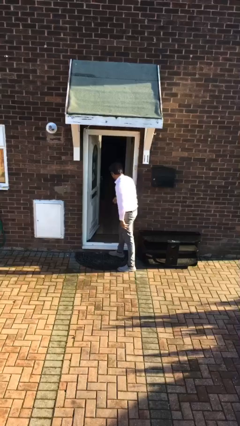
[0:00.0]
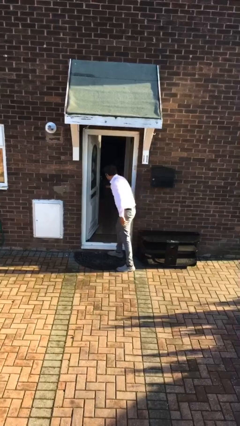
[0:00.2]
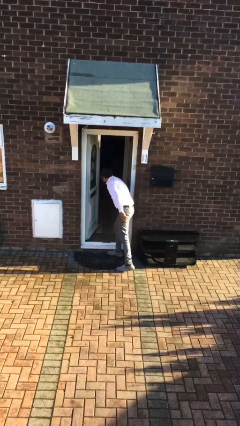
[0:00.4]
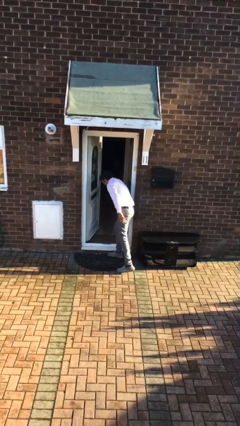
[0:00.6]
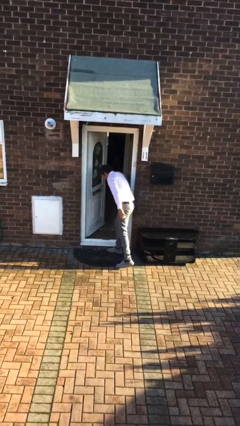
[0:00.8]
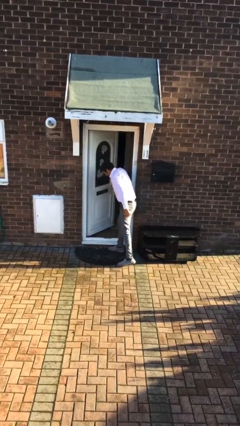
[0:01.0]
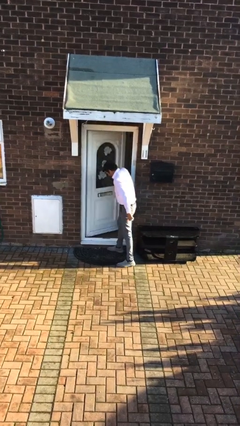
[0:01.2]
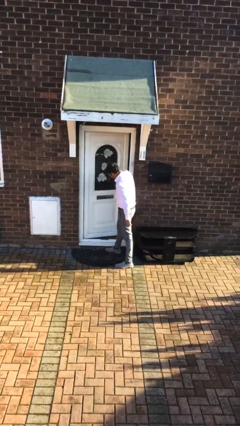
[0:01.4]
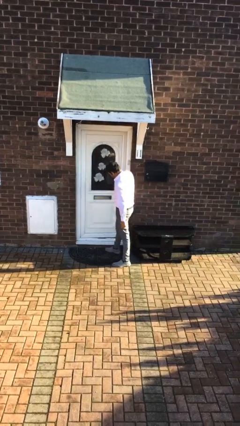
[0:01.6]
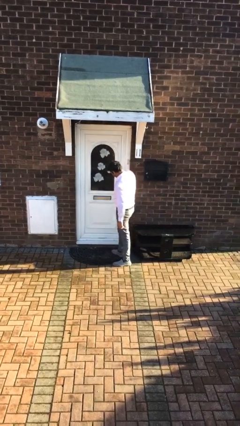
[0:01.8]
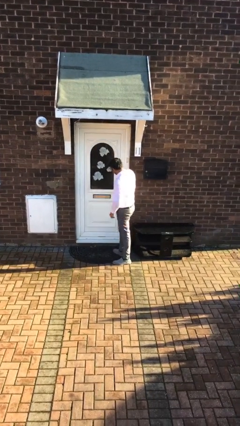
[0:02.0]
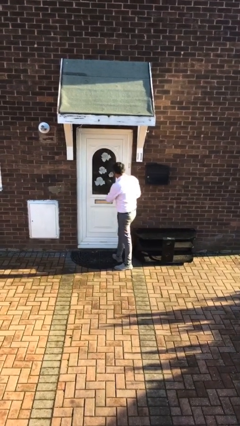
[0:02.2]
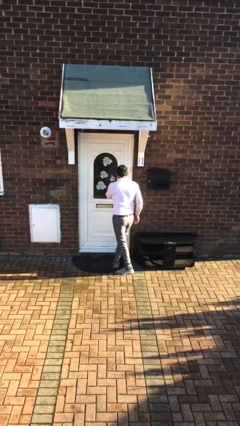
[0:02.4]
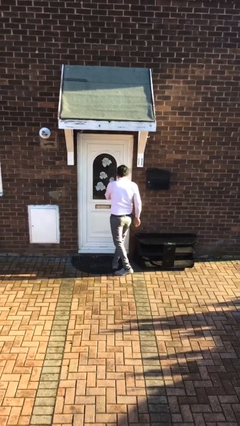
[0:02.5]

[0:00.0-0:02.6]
person closes facility door

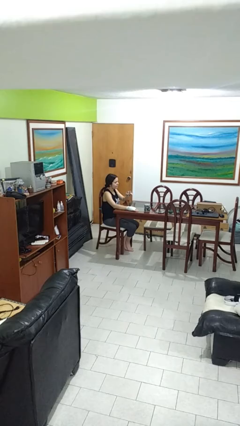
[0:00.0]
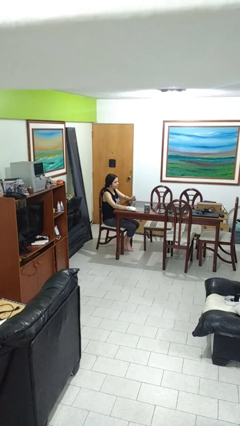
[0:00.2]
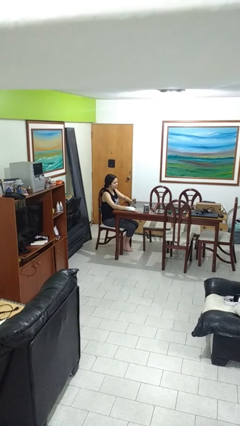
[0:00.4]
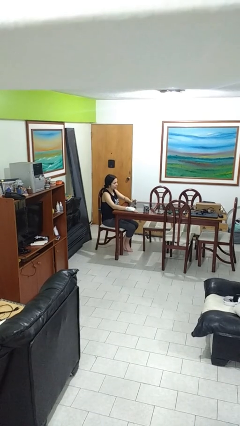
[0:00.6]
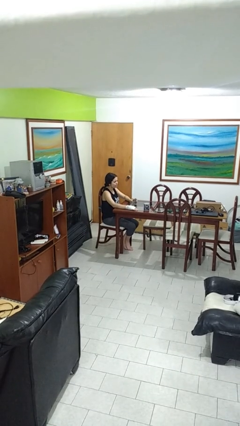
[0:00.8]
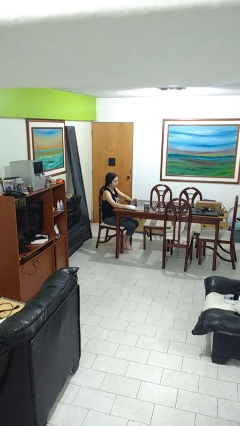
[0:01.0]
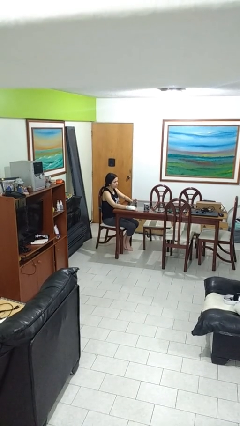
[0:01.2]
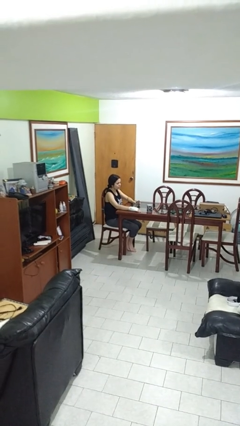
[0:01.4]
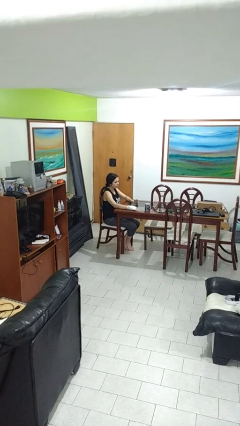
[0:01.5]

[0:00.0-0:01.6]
person puts down object on table

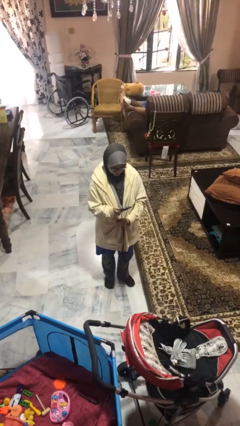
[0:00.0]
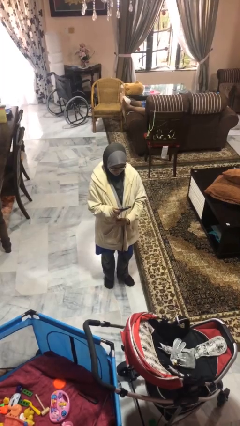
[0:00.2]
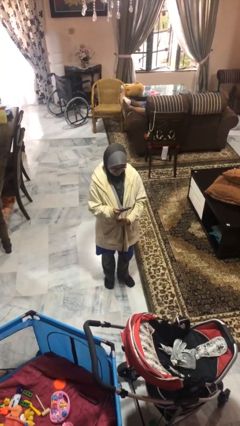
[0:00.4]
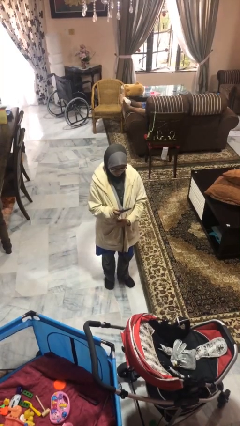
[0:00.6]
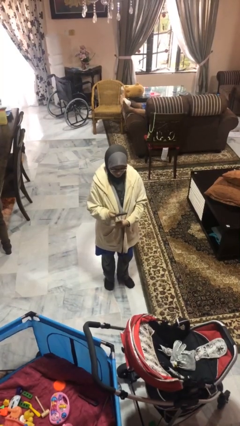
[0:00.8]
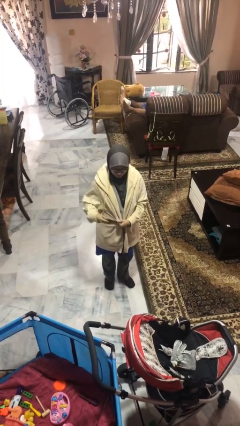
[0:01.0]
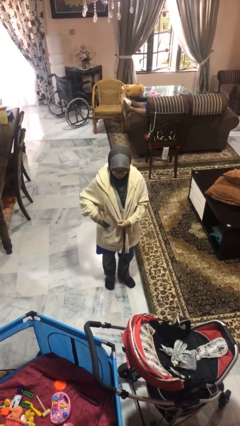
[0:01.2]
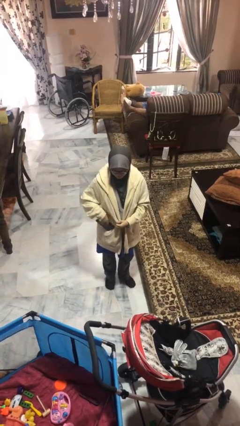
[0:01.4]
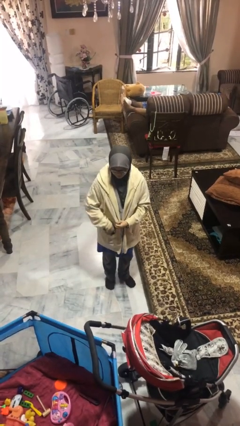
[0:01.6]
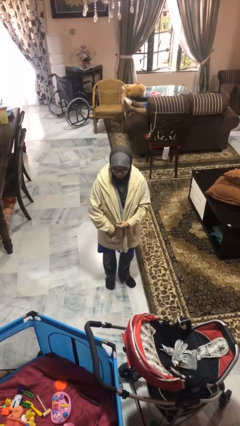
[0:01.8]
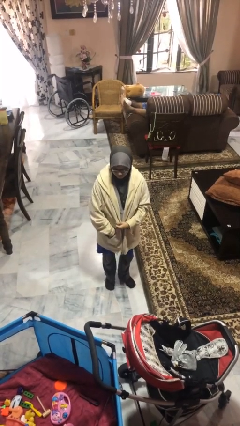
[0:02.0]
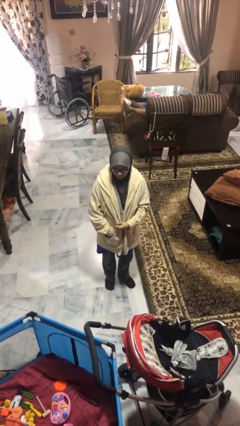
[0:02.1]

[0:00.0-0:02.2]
person puts phone into pocket

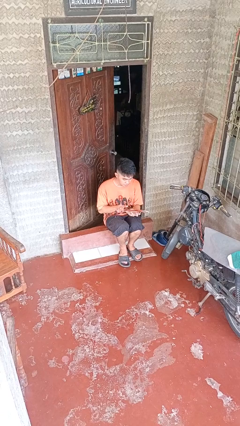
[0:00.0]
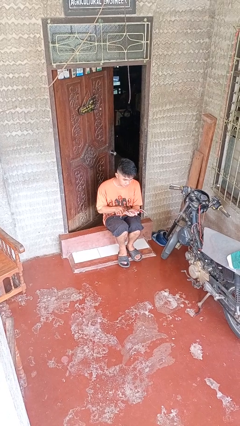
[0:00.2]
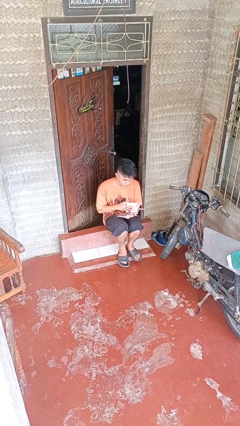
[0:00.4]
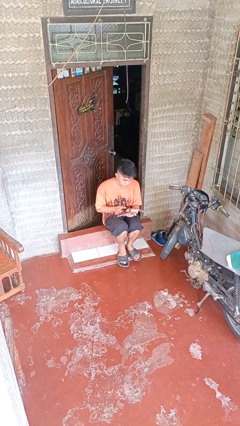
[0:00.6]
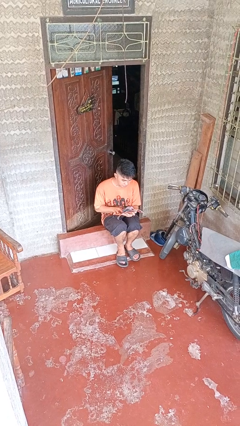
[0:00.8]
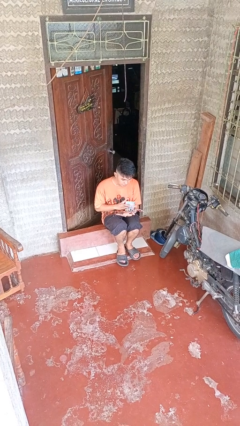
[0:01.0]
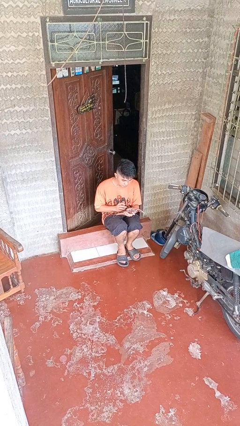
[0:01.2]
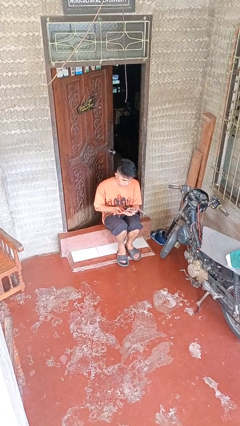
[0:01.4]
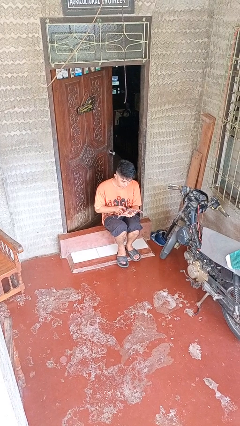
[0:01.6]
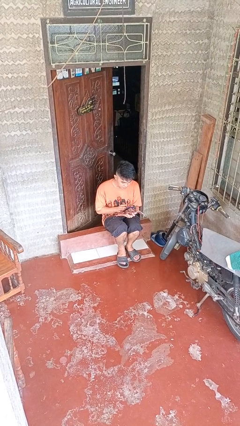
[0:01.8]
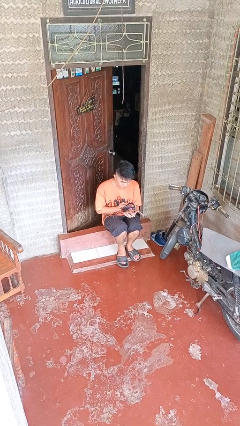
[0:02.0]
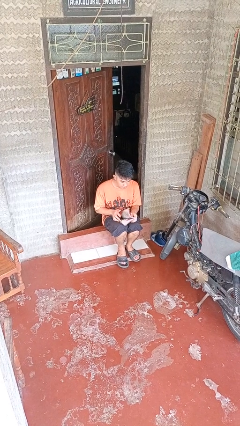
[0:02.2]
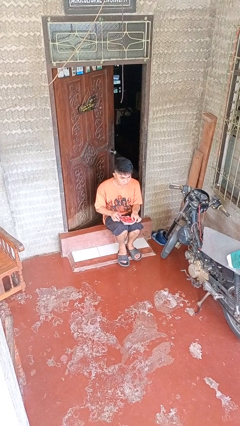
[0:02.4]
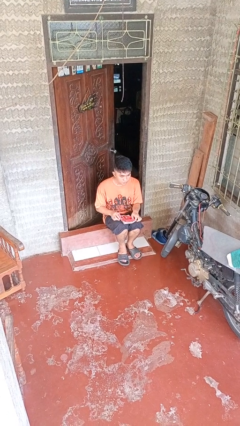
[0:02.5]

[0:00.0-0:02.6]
person reads magazine

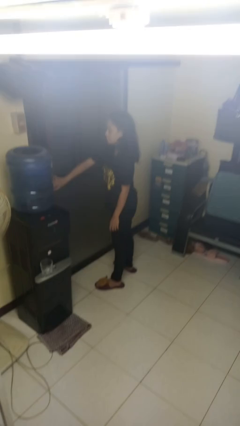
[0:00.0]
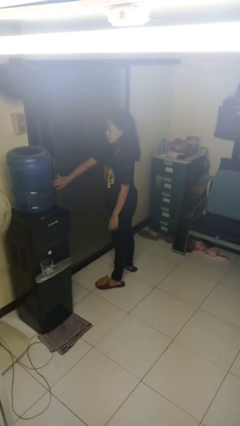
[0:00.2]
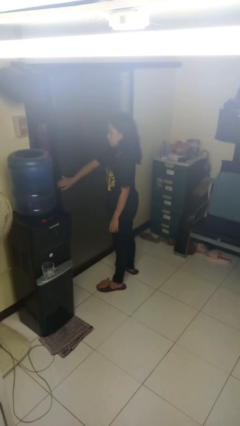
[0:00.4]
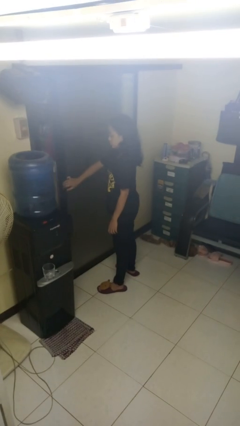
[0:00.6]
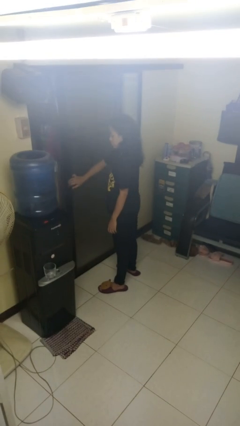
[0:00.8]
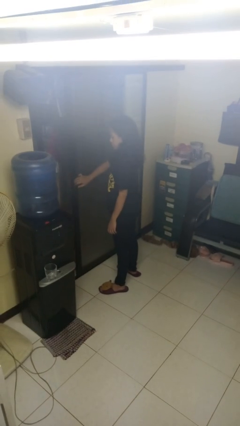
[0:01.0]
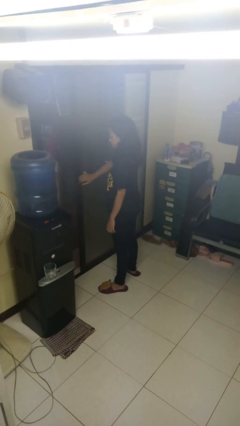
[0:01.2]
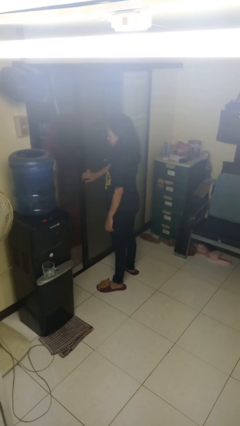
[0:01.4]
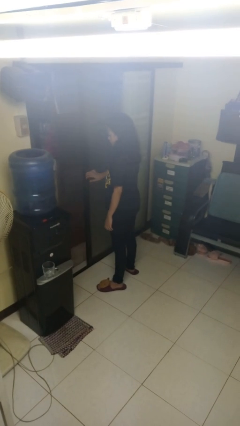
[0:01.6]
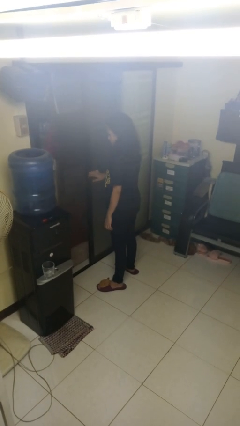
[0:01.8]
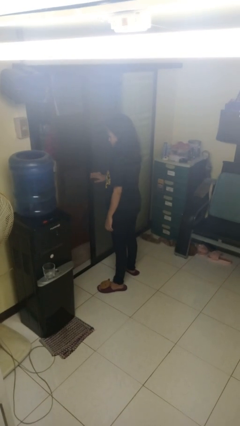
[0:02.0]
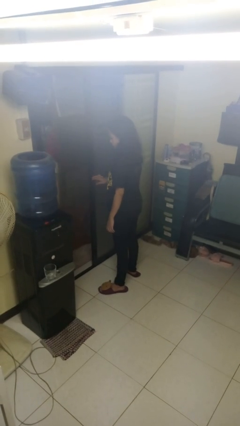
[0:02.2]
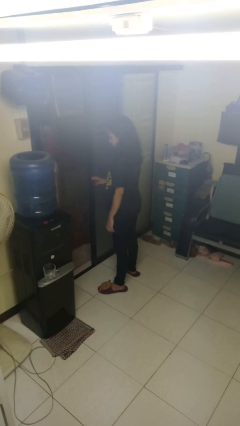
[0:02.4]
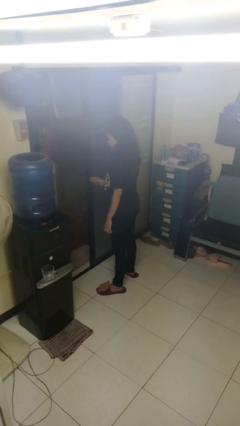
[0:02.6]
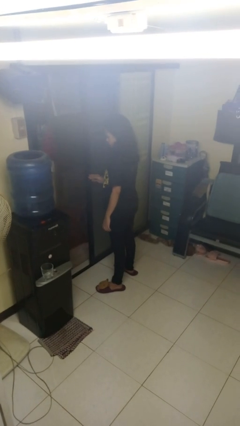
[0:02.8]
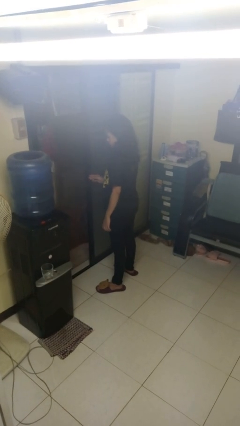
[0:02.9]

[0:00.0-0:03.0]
person opens sliding door

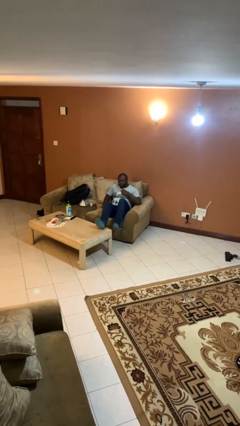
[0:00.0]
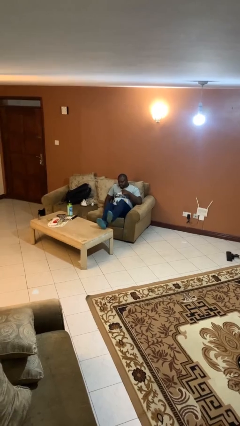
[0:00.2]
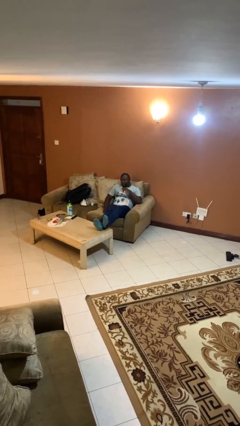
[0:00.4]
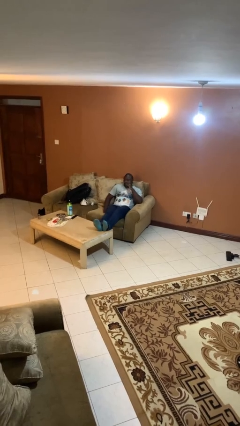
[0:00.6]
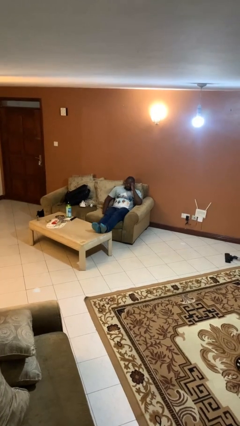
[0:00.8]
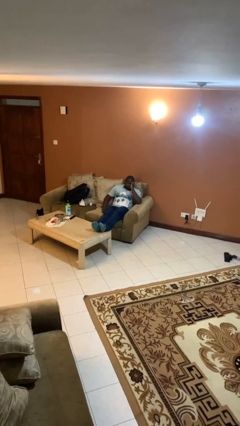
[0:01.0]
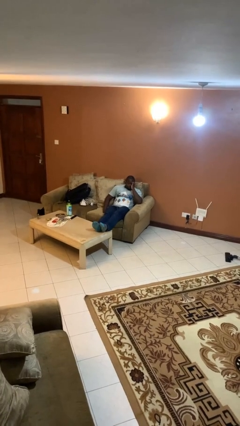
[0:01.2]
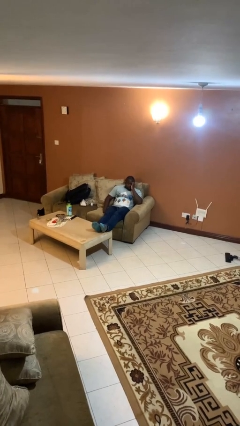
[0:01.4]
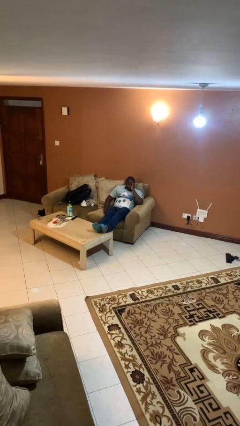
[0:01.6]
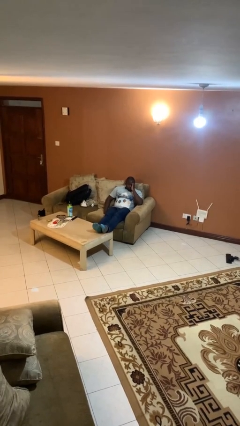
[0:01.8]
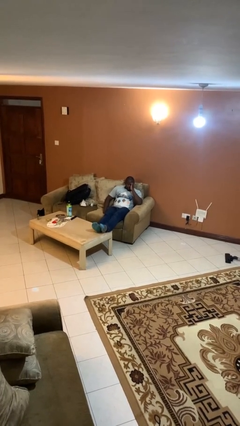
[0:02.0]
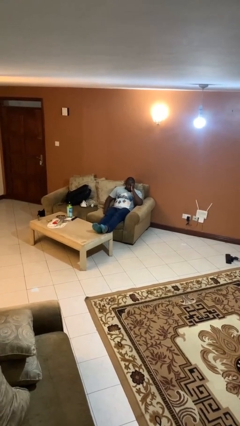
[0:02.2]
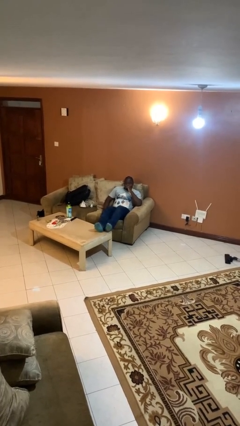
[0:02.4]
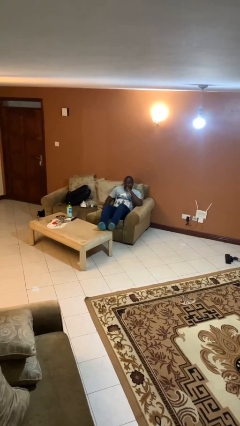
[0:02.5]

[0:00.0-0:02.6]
person puts feet up

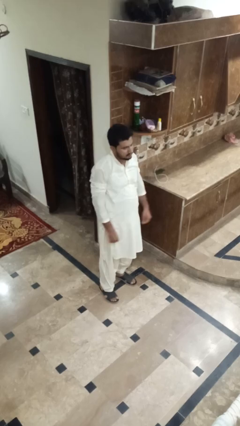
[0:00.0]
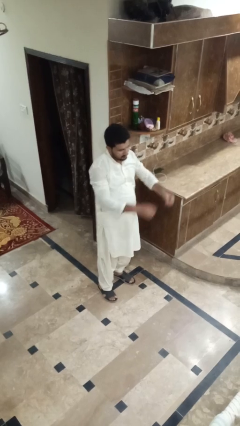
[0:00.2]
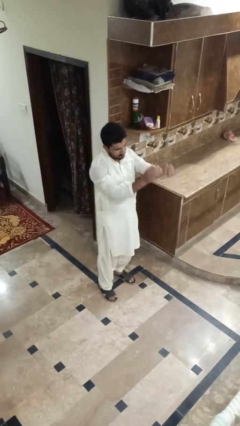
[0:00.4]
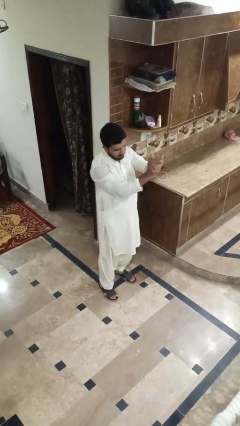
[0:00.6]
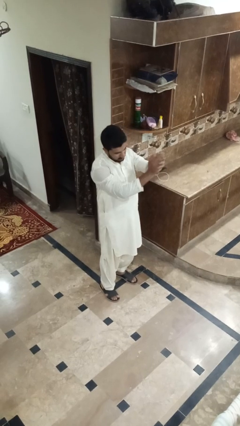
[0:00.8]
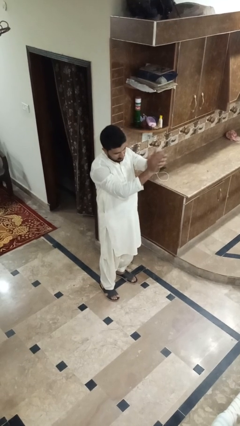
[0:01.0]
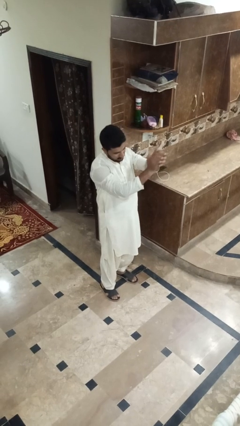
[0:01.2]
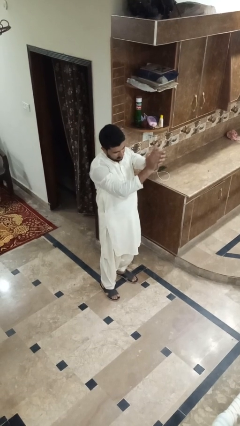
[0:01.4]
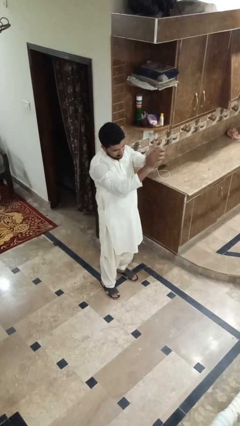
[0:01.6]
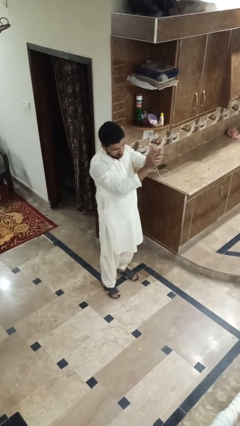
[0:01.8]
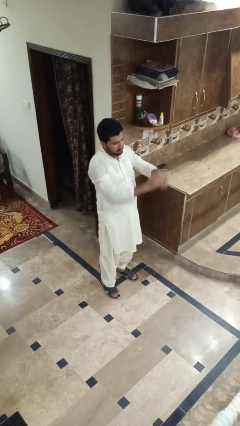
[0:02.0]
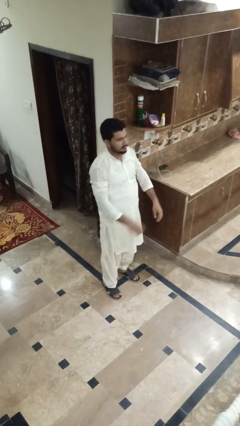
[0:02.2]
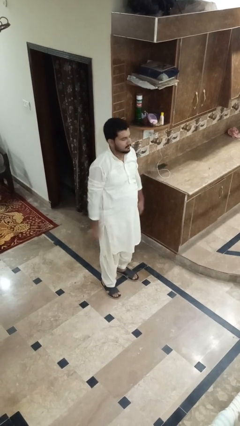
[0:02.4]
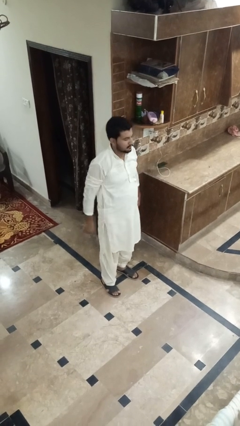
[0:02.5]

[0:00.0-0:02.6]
person claps hands

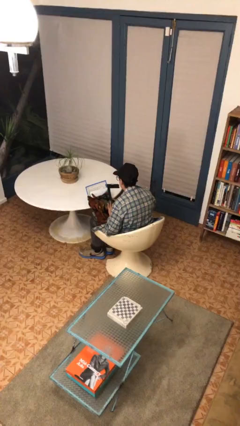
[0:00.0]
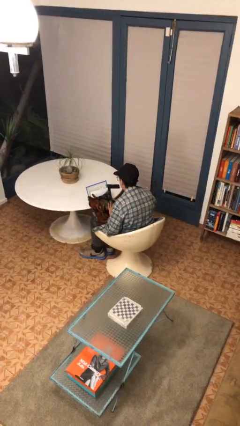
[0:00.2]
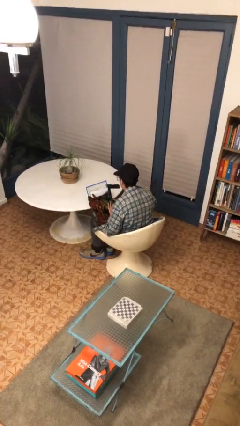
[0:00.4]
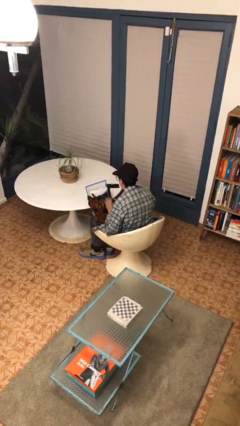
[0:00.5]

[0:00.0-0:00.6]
person searches in bag
